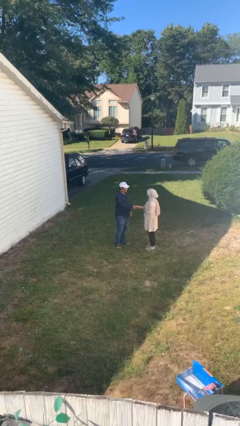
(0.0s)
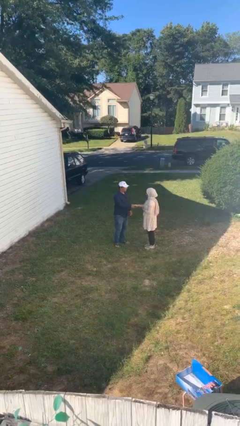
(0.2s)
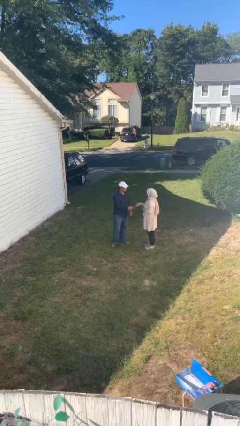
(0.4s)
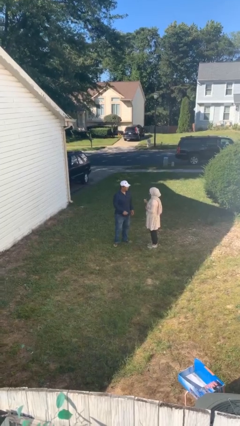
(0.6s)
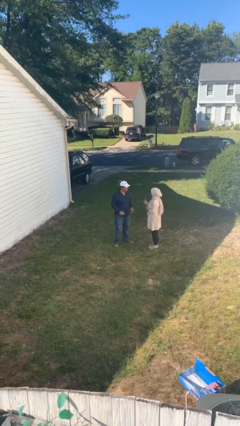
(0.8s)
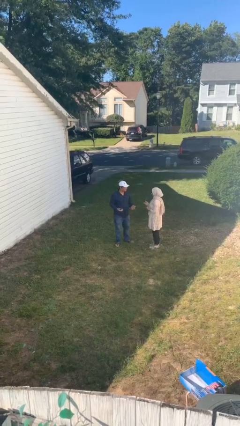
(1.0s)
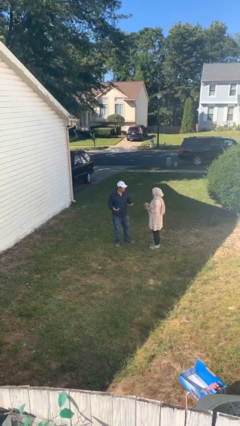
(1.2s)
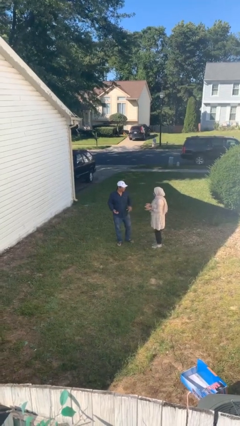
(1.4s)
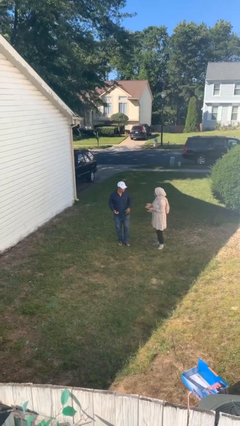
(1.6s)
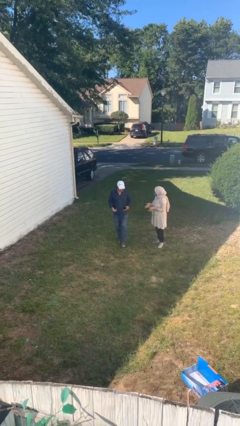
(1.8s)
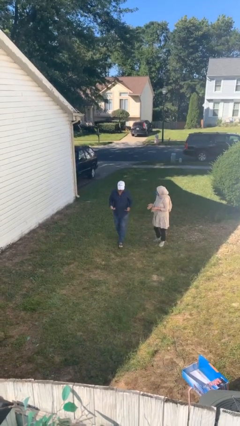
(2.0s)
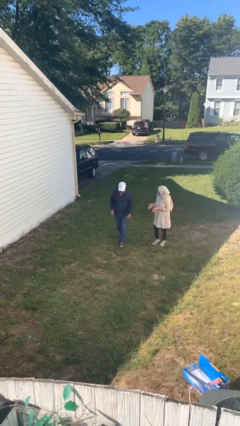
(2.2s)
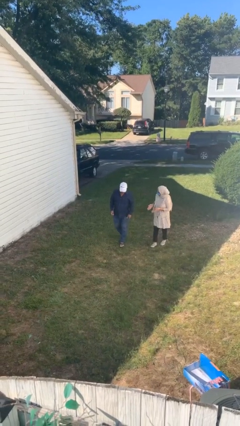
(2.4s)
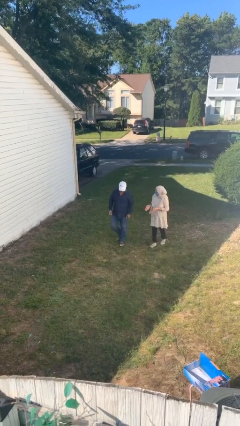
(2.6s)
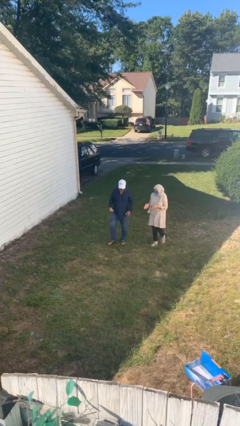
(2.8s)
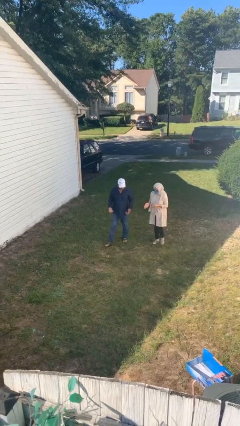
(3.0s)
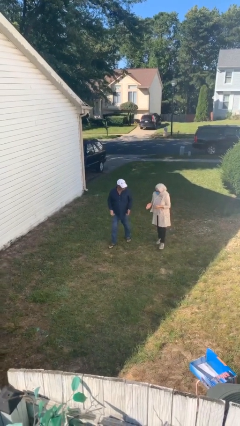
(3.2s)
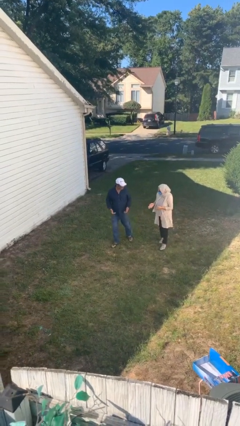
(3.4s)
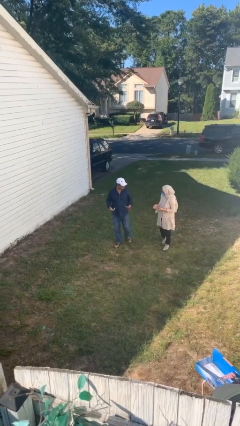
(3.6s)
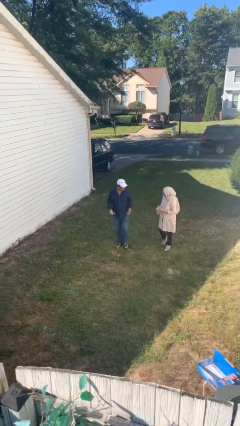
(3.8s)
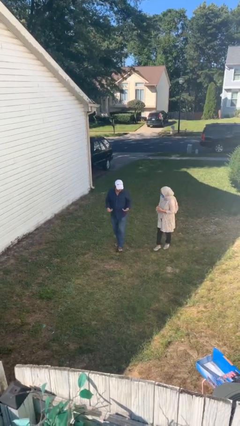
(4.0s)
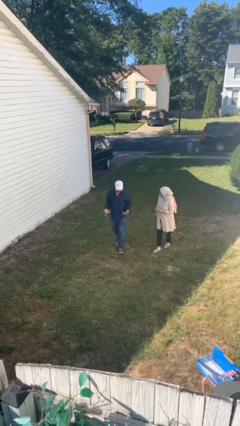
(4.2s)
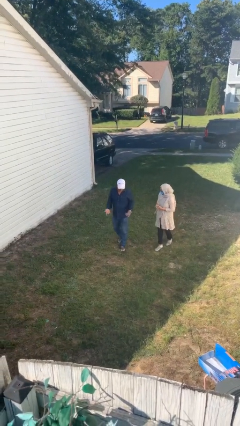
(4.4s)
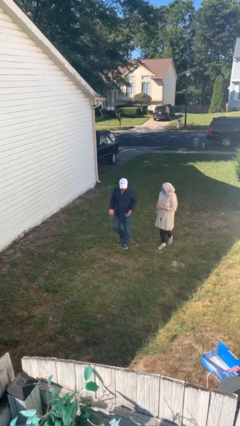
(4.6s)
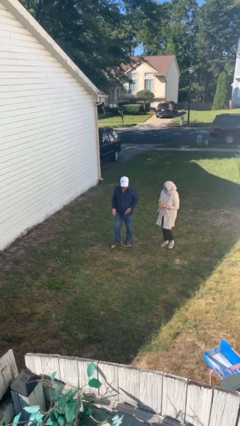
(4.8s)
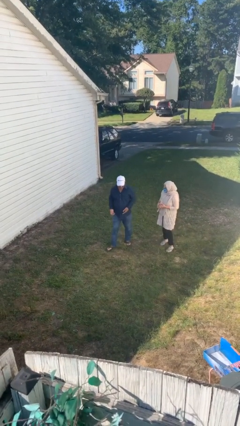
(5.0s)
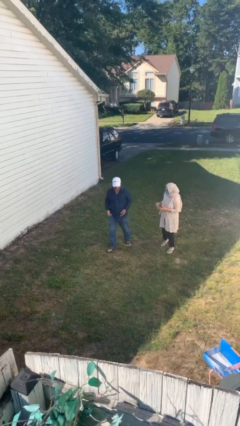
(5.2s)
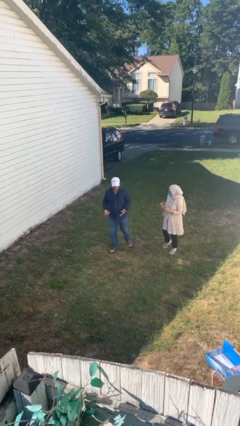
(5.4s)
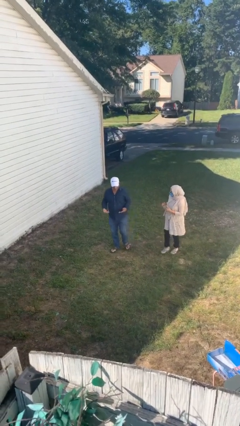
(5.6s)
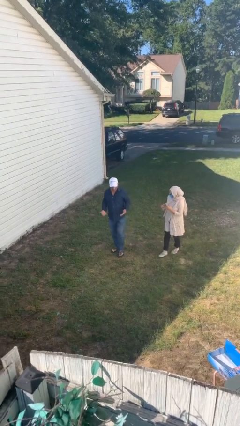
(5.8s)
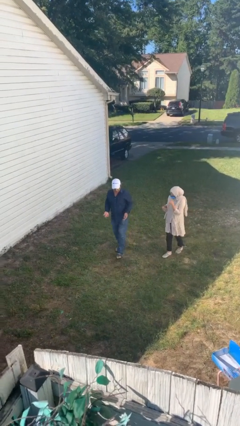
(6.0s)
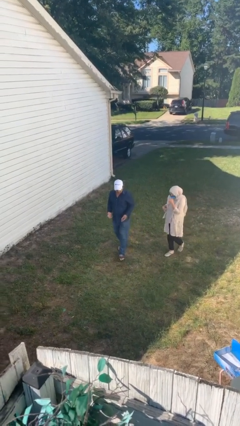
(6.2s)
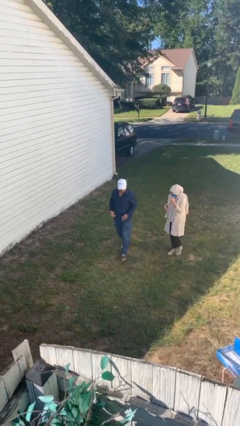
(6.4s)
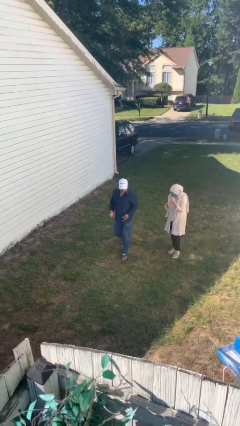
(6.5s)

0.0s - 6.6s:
person talks to person

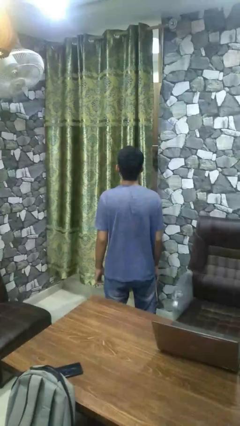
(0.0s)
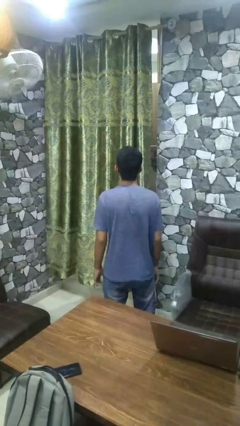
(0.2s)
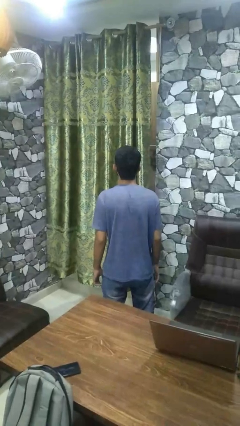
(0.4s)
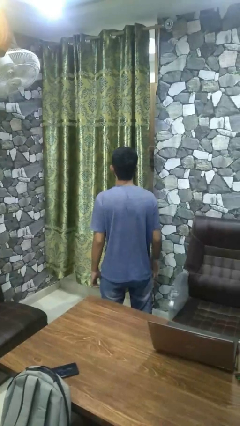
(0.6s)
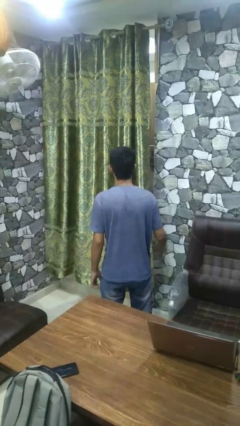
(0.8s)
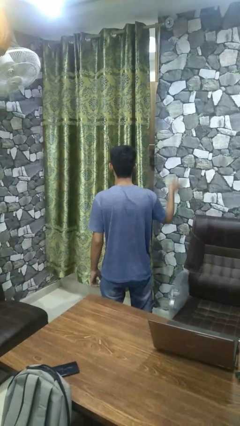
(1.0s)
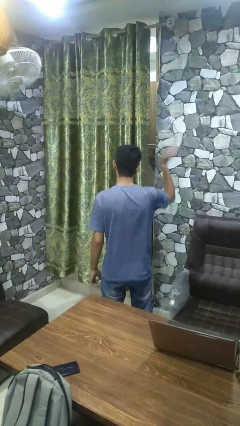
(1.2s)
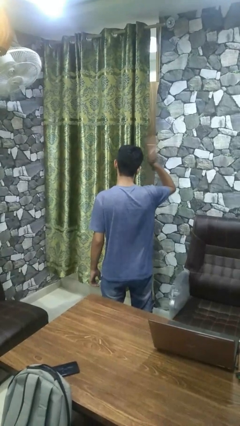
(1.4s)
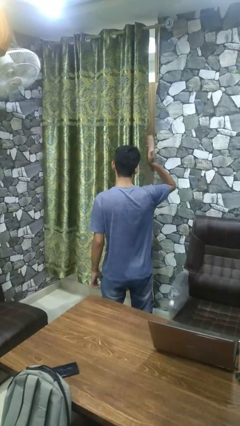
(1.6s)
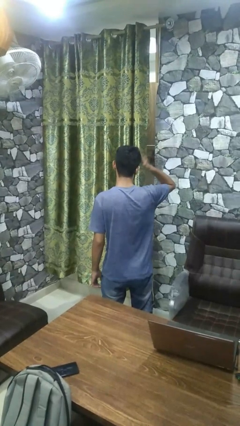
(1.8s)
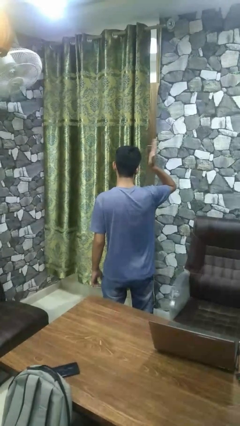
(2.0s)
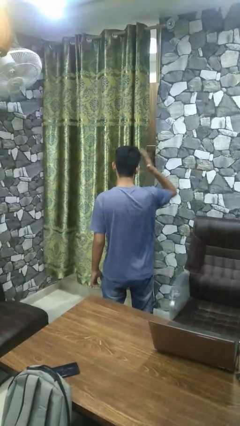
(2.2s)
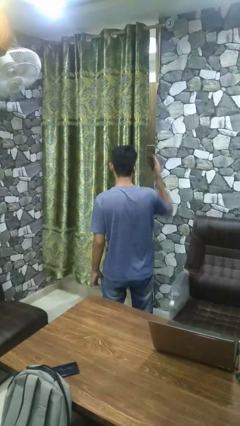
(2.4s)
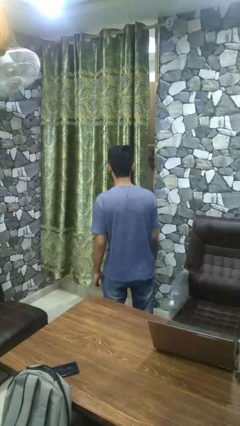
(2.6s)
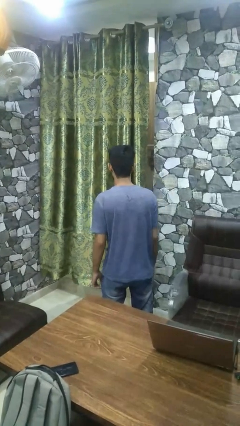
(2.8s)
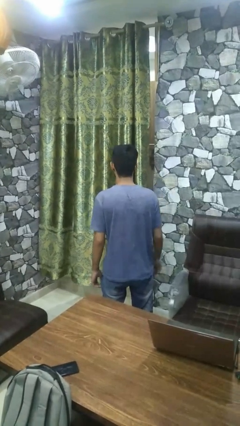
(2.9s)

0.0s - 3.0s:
person pats head

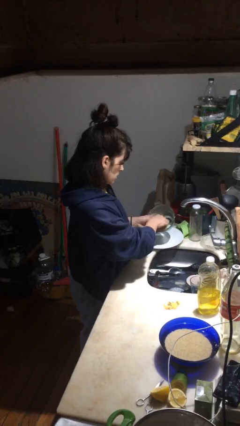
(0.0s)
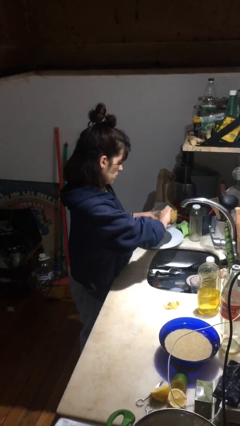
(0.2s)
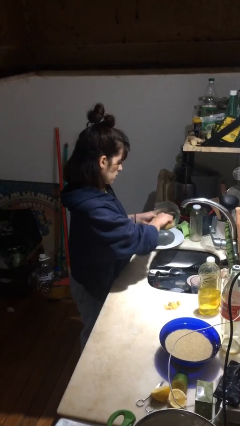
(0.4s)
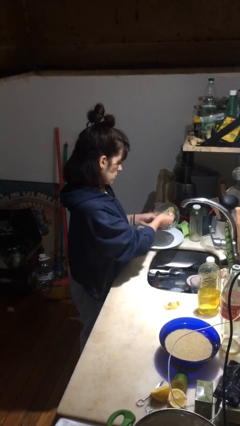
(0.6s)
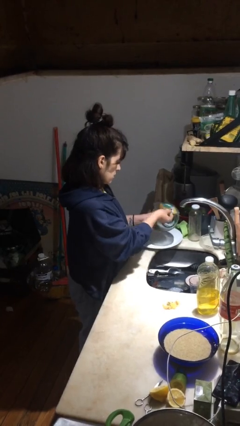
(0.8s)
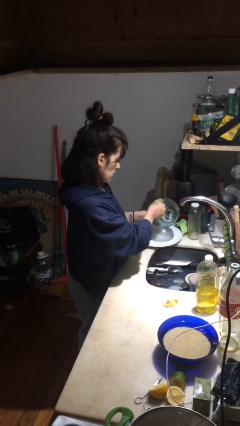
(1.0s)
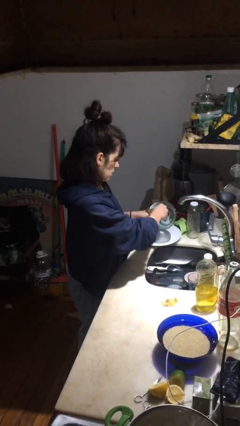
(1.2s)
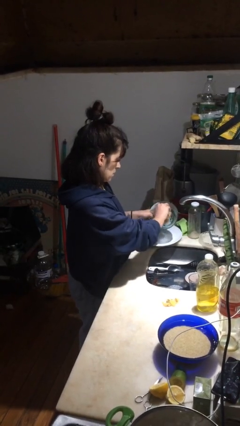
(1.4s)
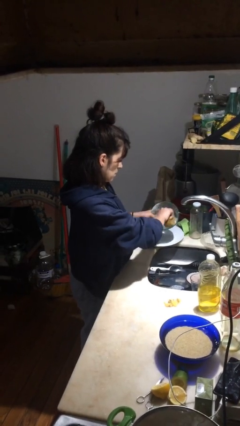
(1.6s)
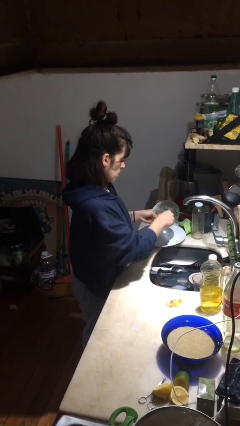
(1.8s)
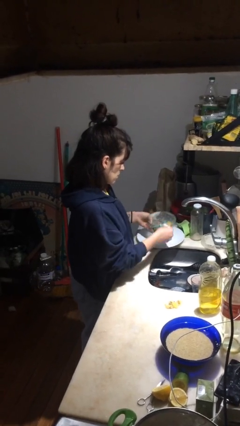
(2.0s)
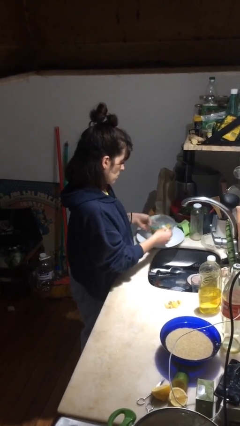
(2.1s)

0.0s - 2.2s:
person washes dish

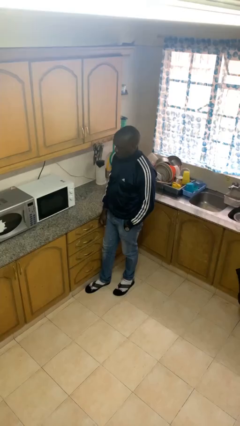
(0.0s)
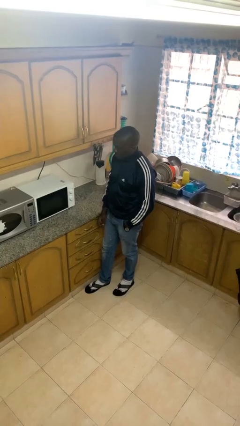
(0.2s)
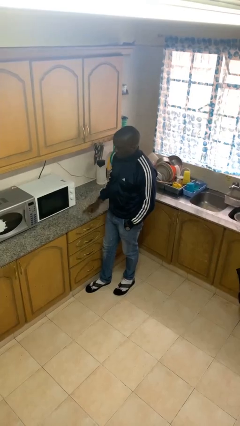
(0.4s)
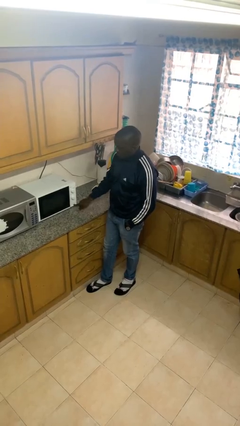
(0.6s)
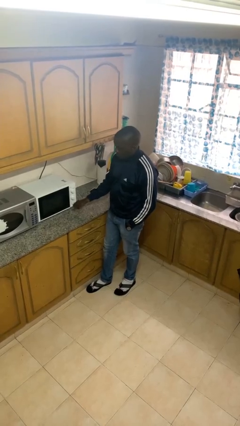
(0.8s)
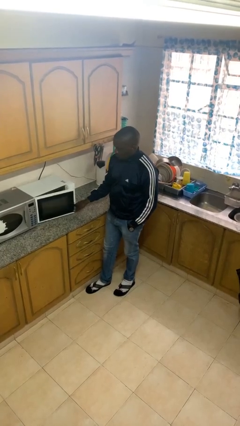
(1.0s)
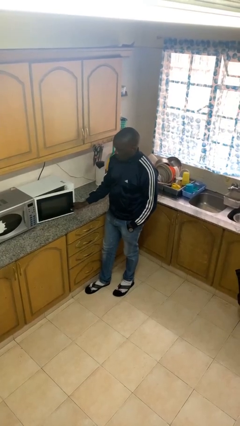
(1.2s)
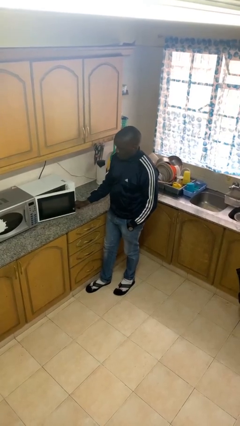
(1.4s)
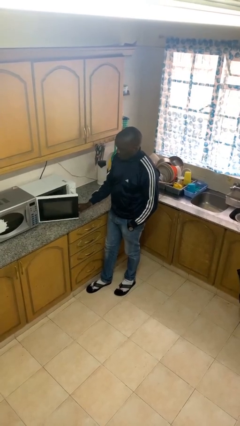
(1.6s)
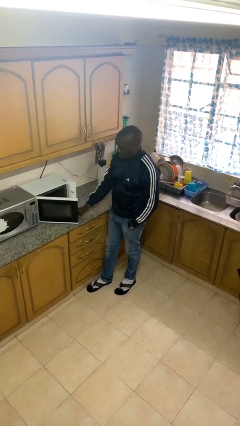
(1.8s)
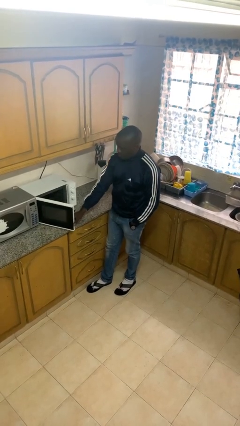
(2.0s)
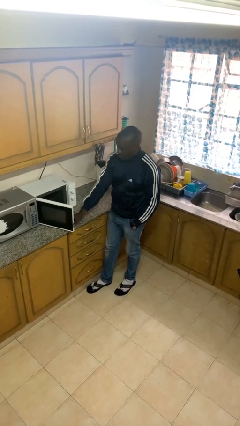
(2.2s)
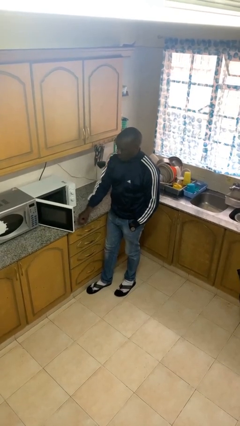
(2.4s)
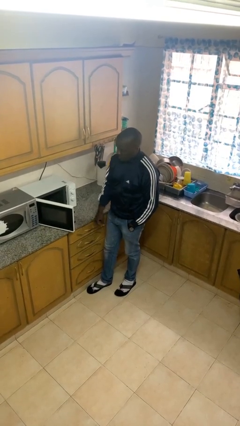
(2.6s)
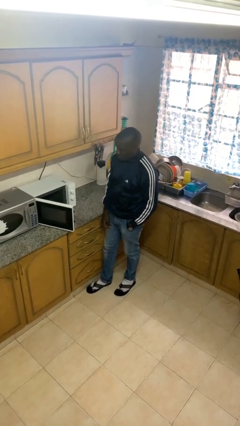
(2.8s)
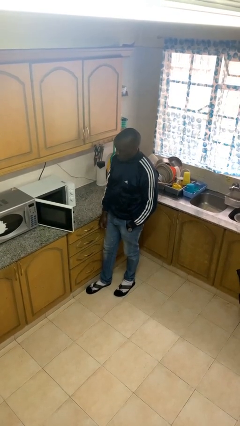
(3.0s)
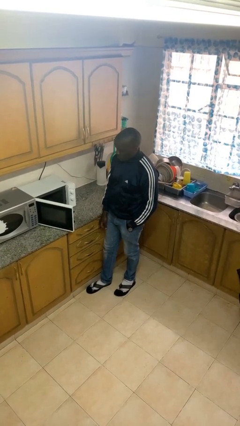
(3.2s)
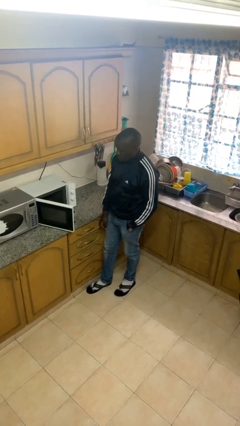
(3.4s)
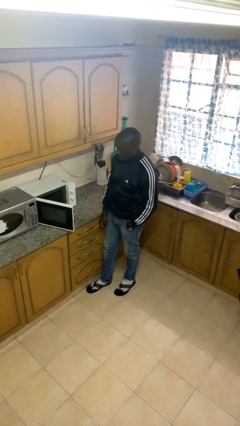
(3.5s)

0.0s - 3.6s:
person opens microwave

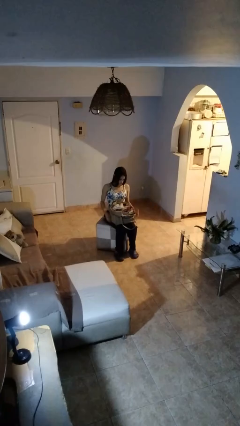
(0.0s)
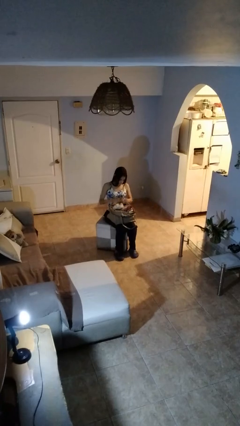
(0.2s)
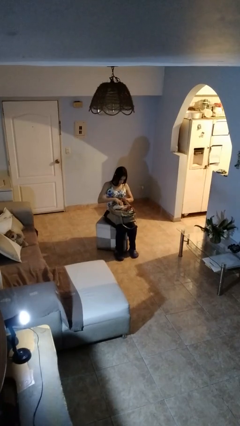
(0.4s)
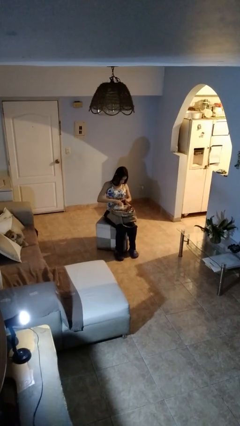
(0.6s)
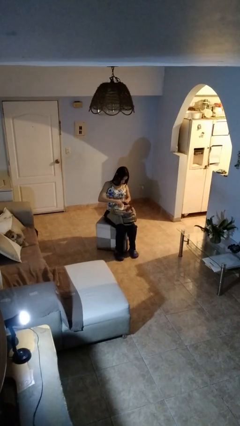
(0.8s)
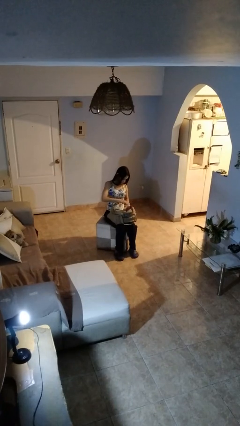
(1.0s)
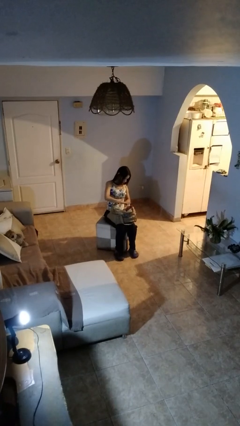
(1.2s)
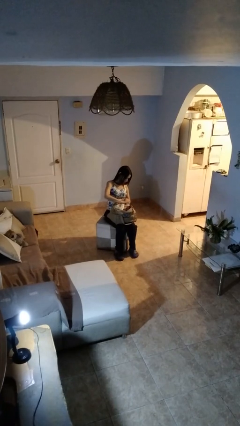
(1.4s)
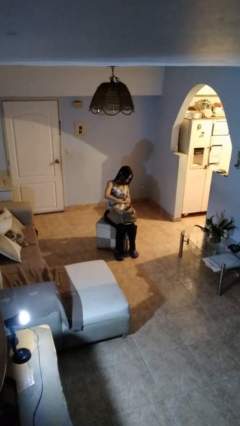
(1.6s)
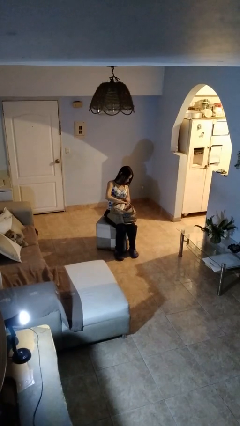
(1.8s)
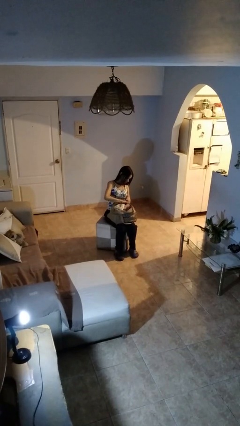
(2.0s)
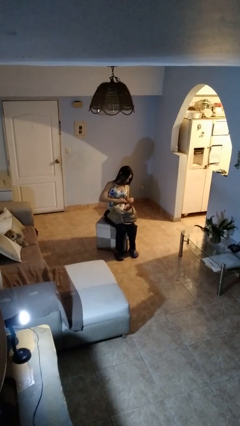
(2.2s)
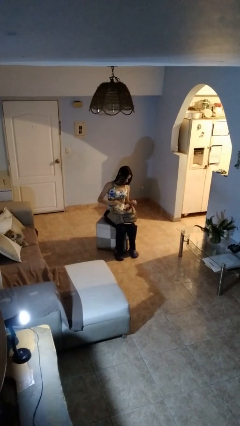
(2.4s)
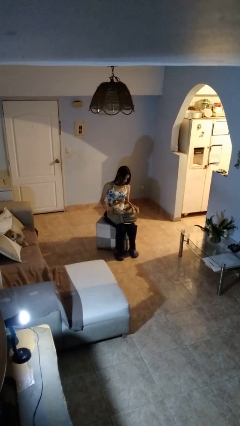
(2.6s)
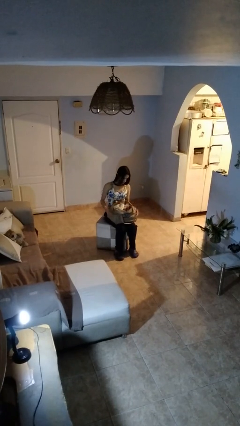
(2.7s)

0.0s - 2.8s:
person searches in bag
